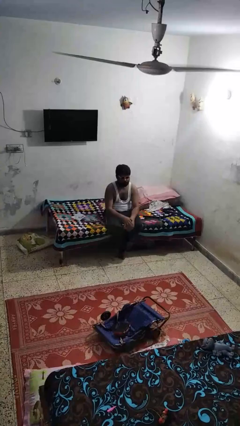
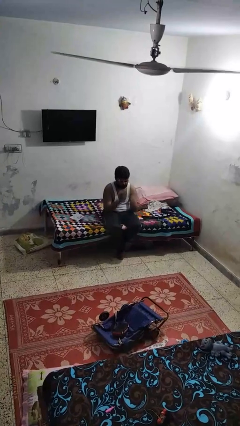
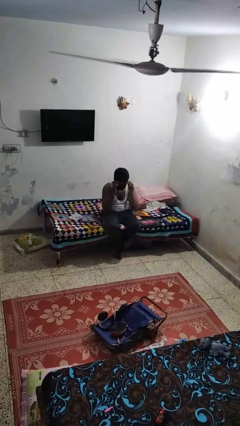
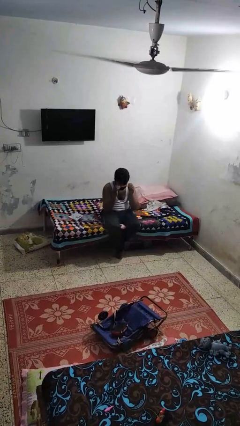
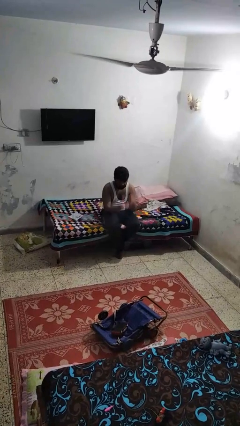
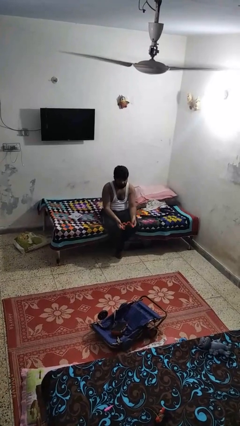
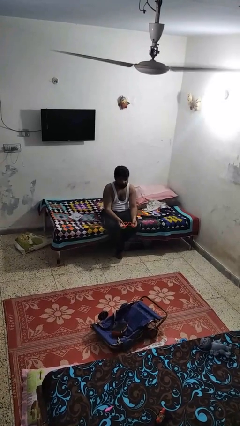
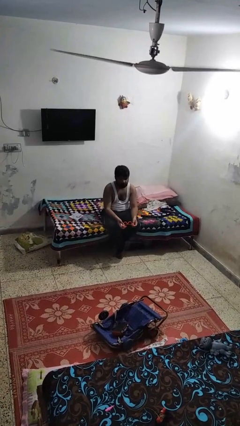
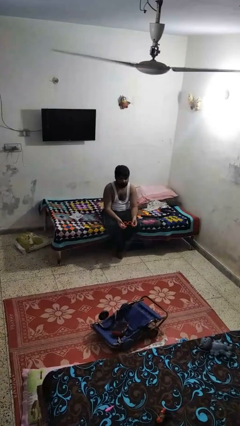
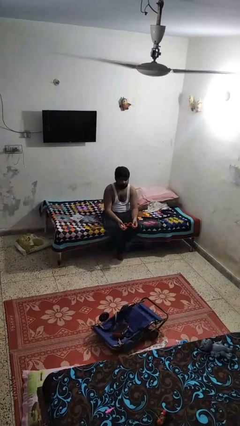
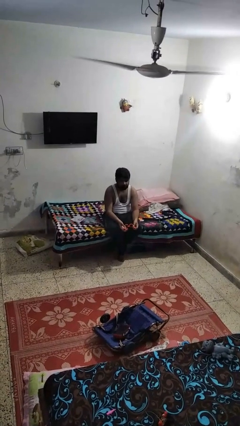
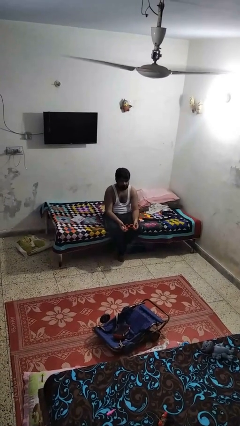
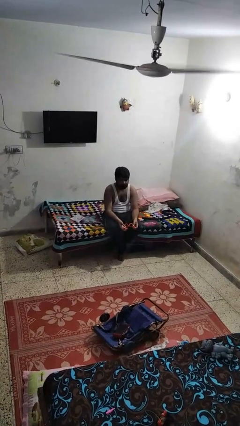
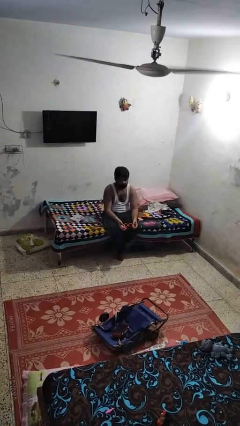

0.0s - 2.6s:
person takes off sunglasses

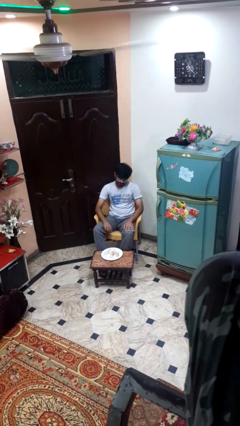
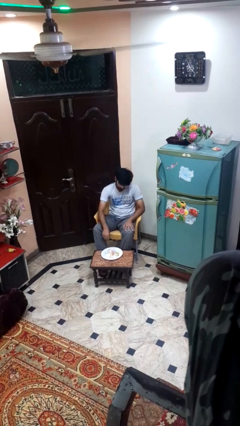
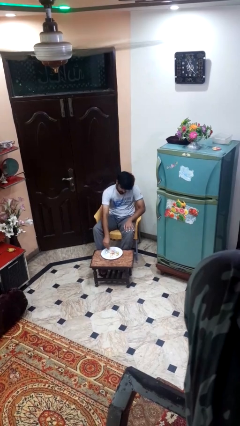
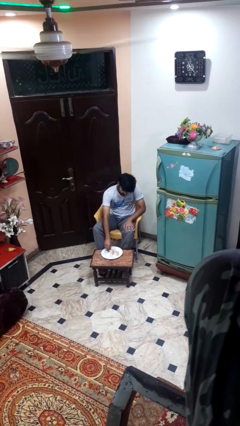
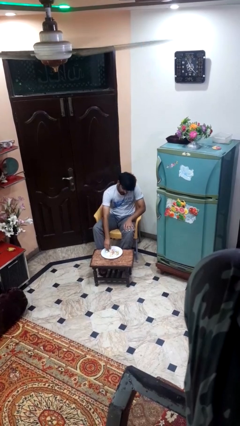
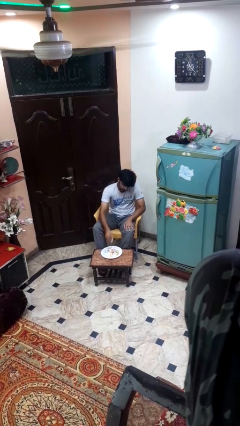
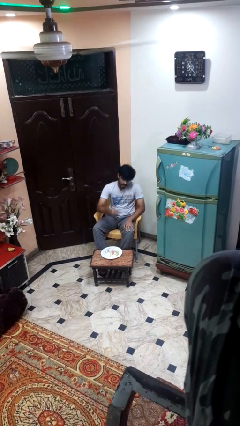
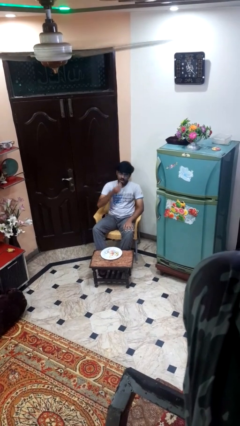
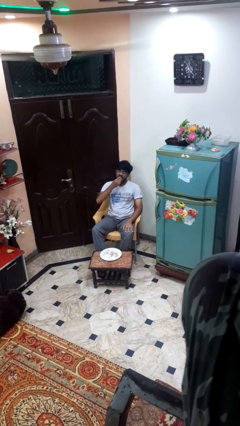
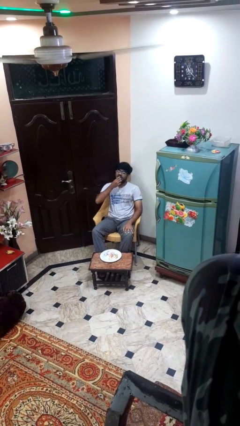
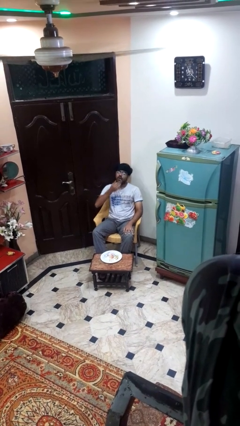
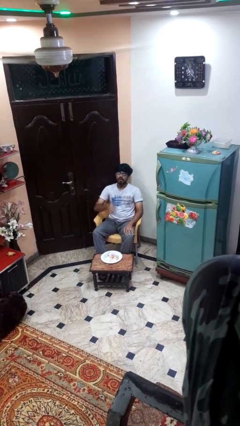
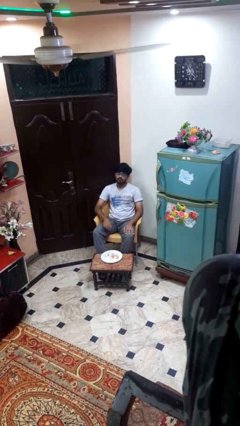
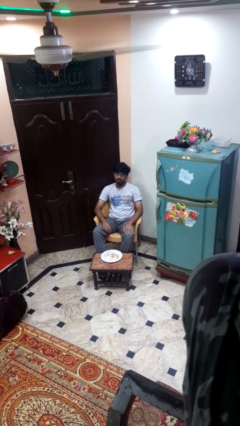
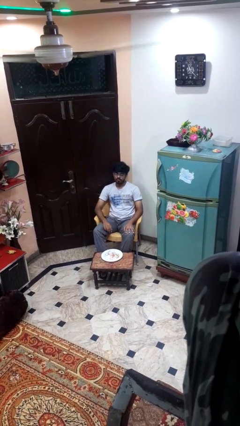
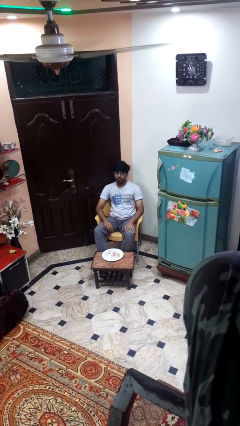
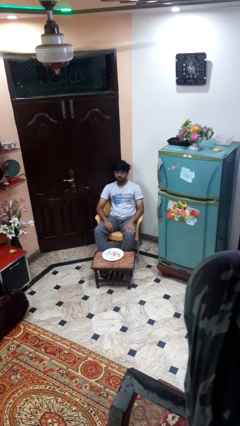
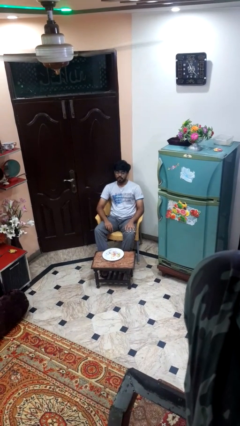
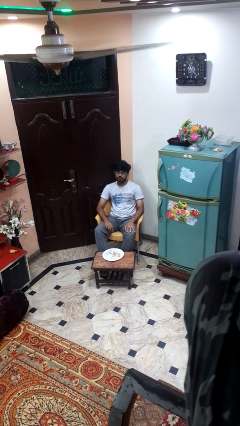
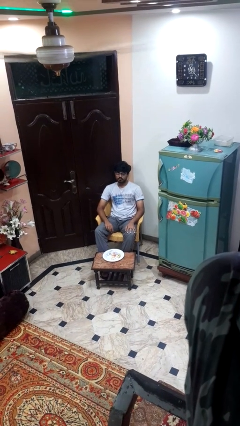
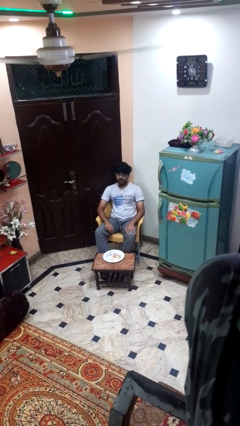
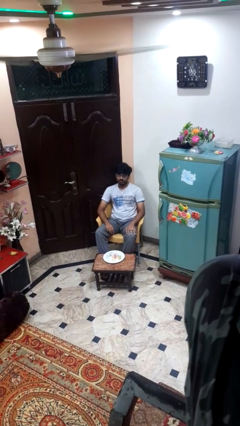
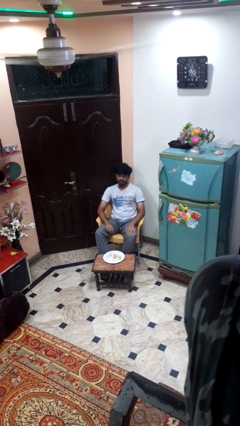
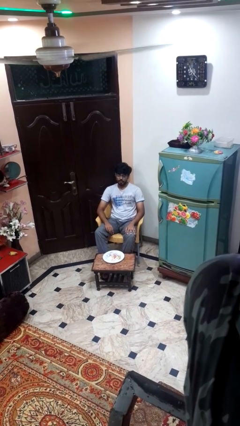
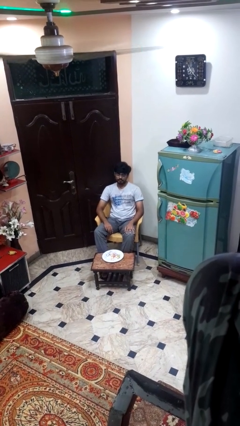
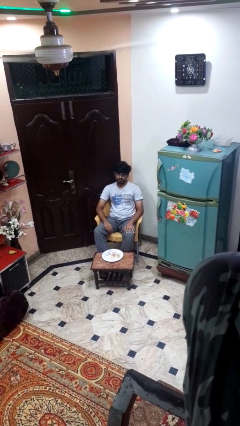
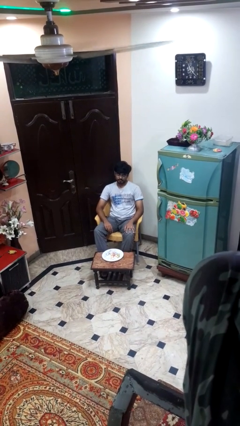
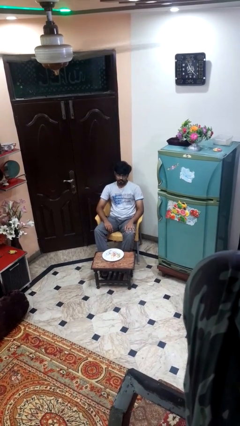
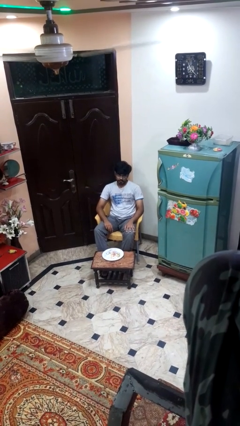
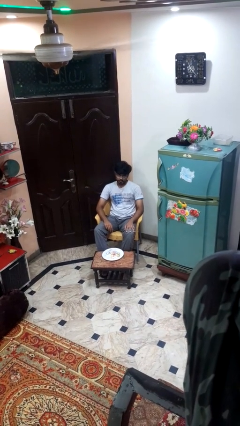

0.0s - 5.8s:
person eats with hands

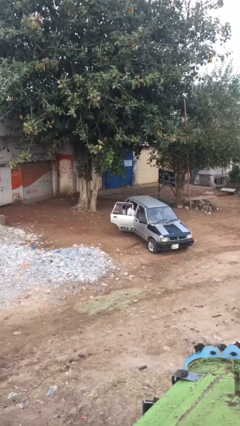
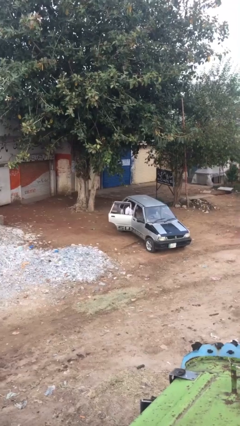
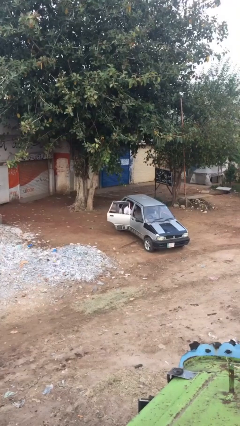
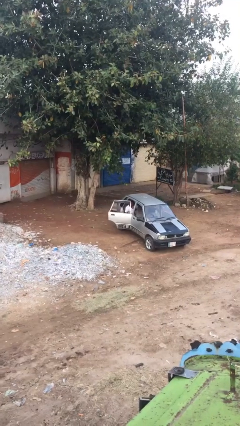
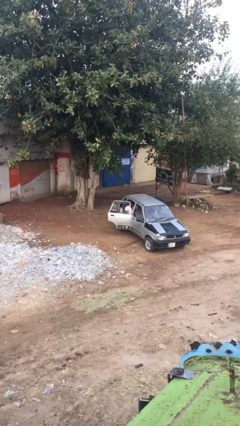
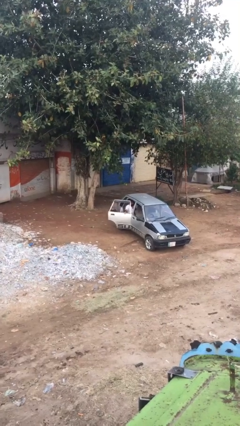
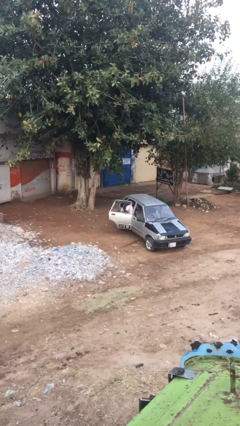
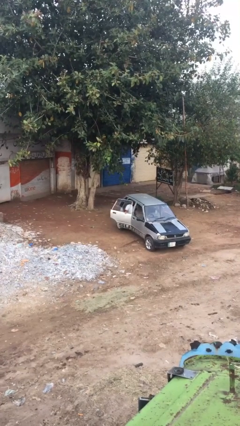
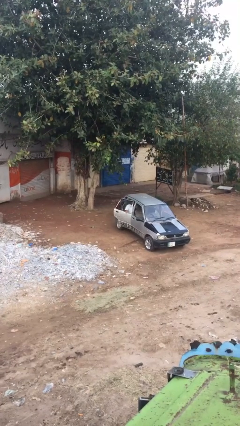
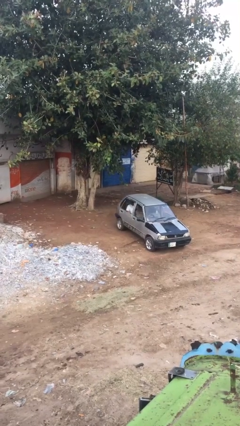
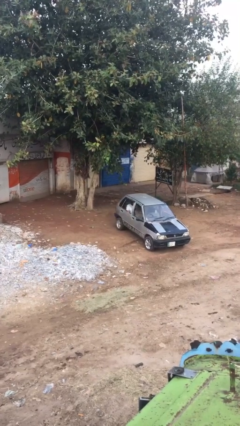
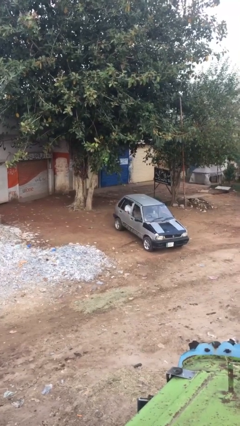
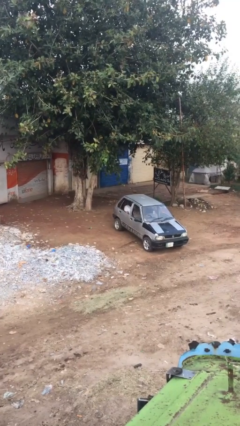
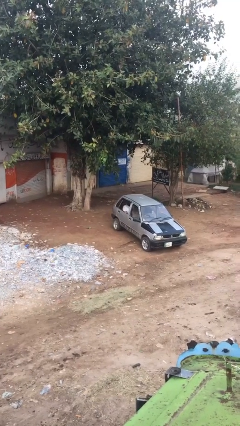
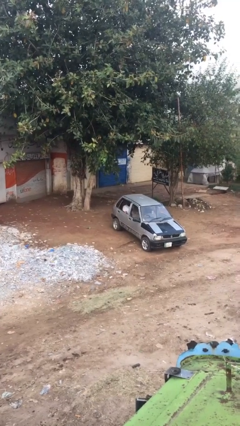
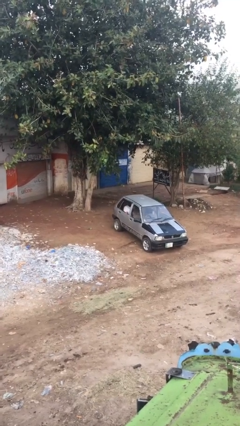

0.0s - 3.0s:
person closes car door

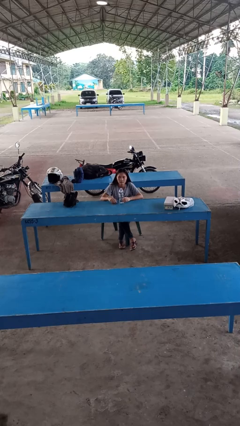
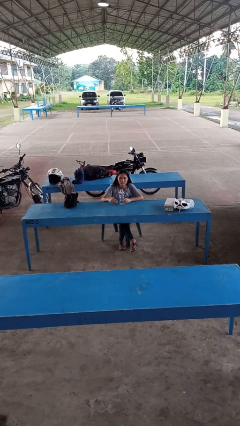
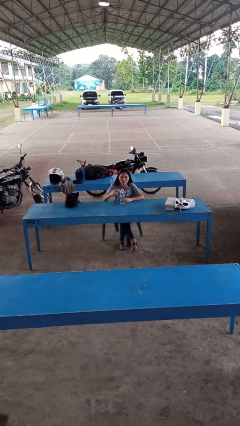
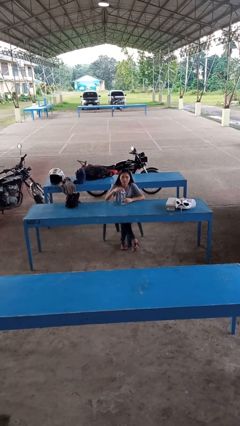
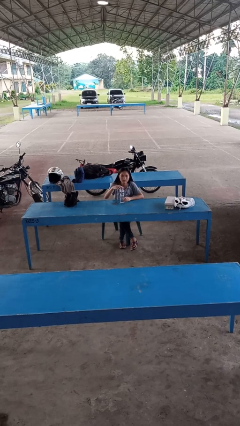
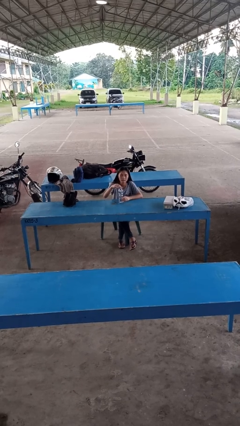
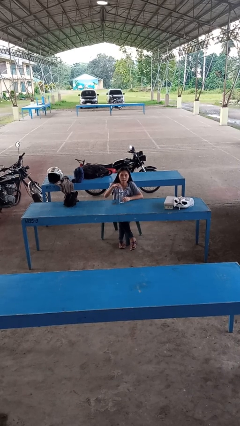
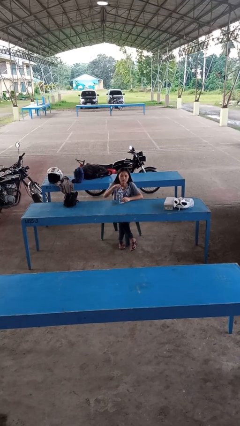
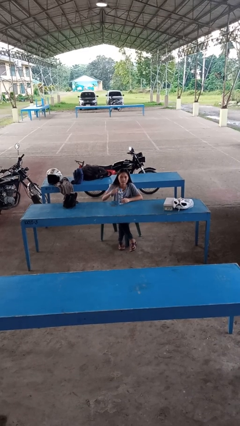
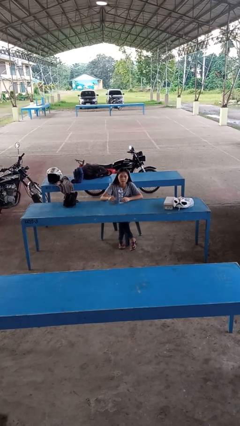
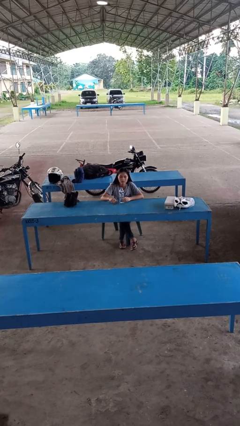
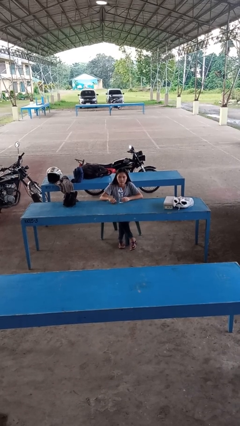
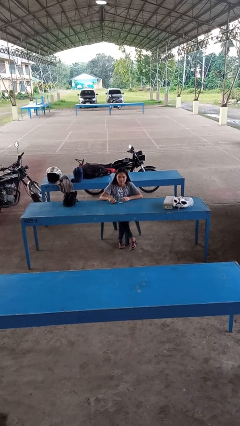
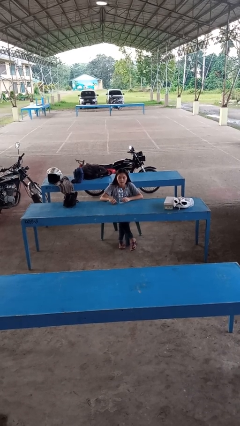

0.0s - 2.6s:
person screws lid to bottle

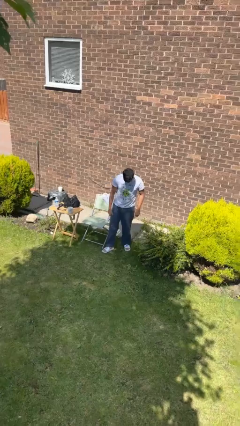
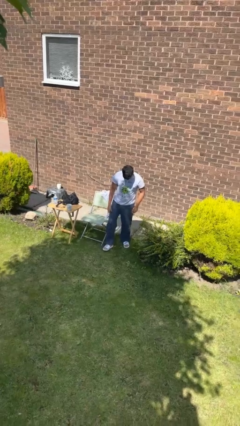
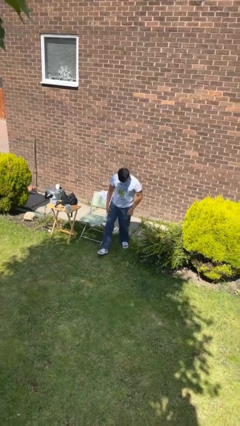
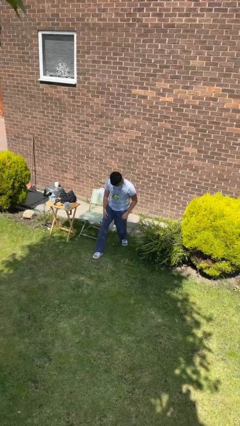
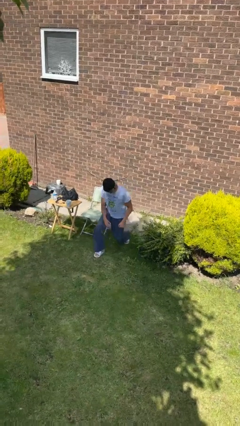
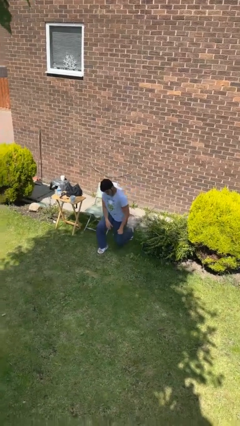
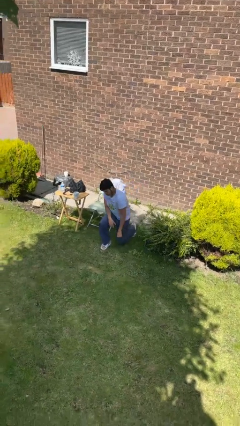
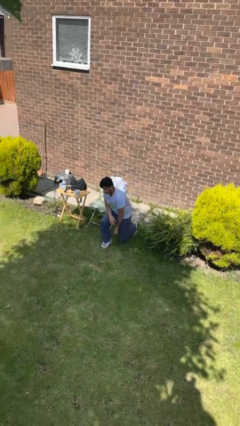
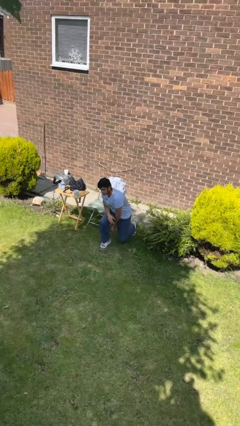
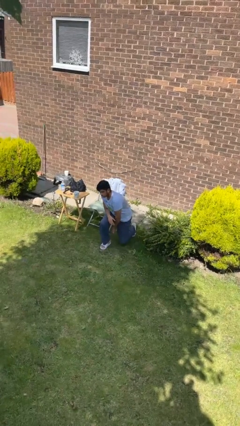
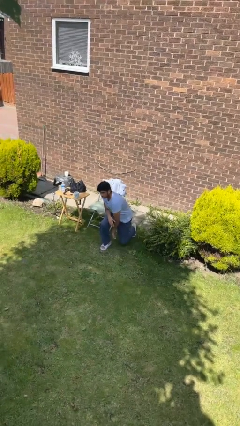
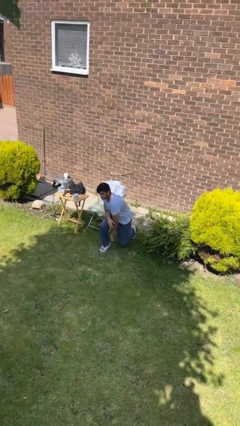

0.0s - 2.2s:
person kneels

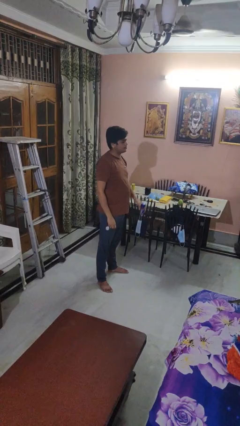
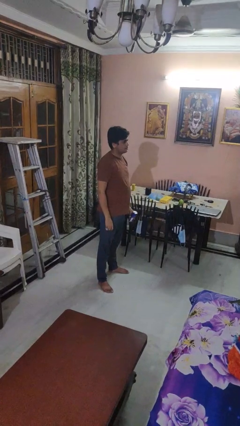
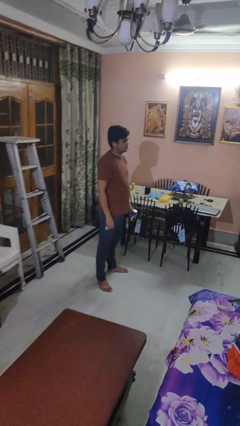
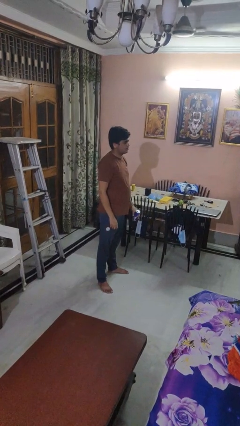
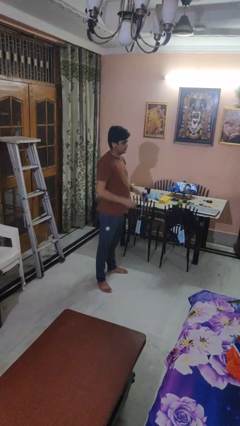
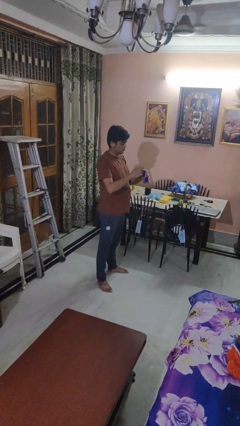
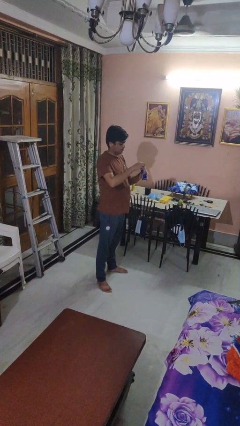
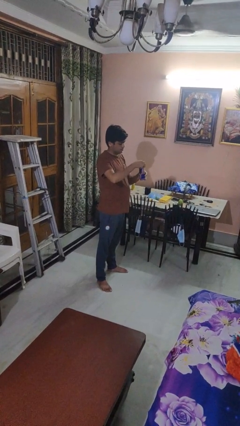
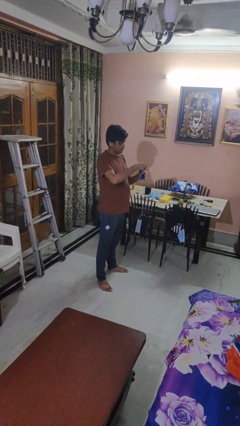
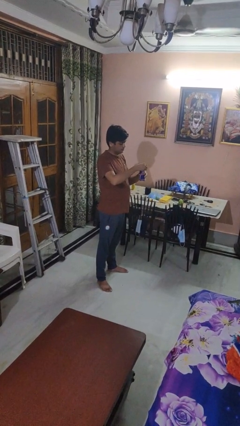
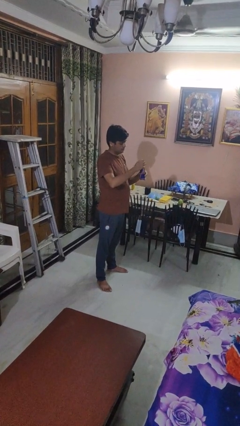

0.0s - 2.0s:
person opens beverage can
